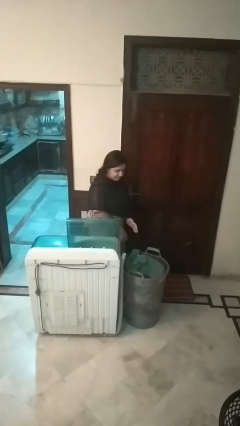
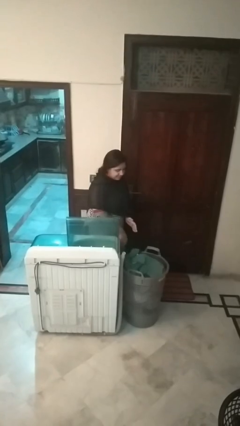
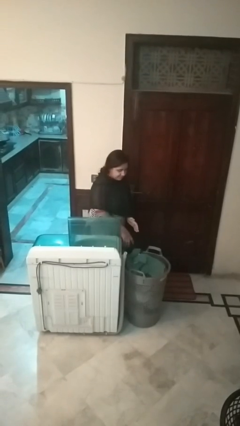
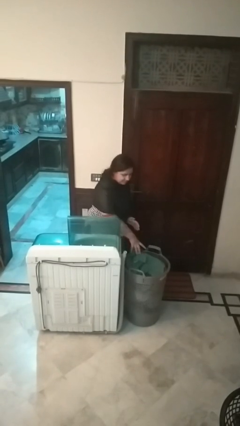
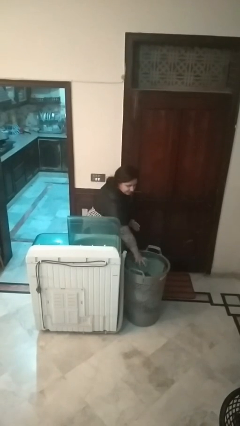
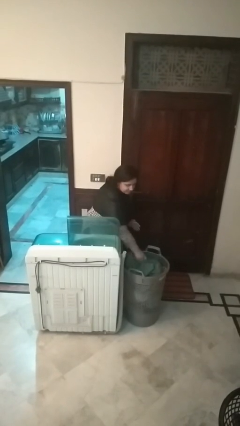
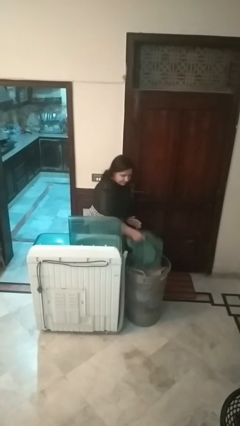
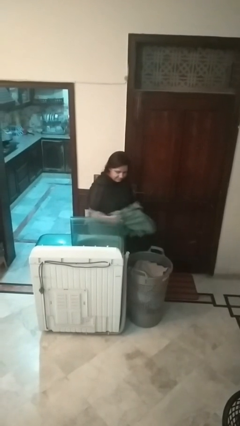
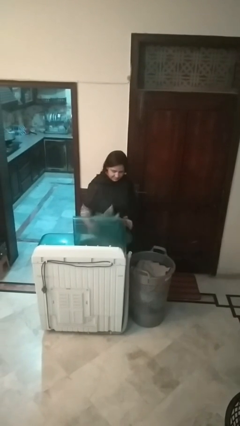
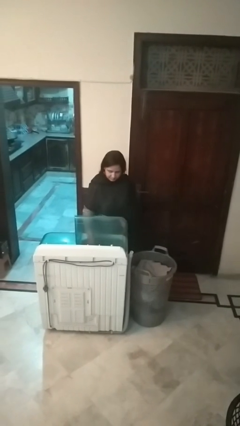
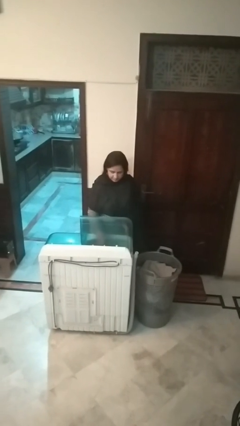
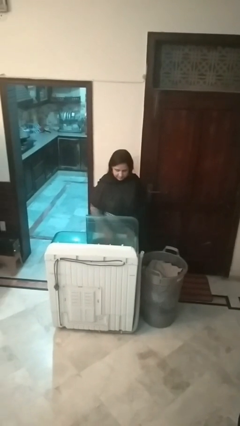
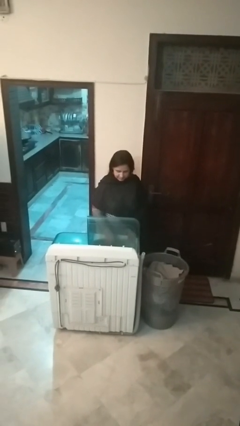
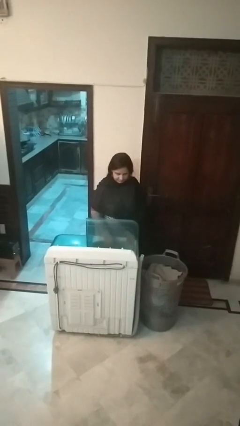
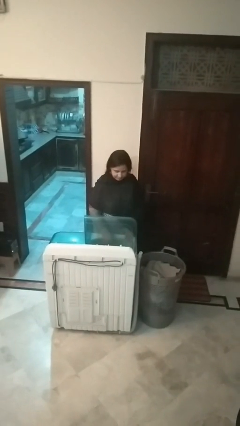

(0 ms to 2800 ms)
person loads clotheswasher

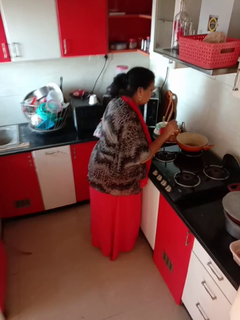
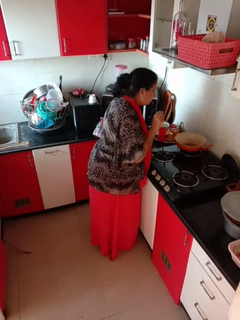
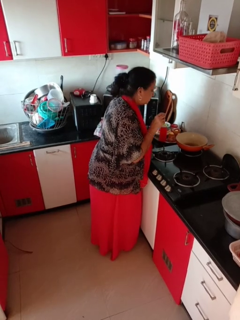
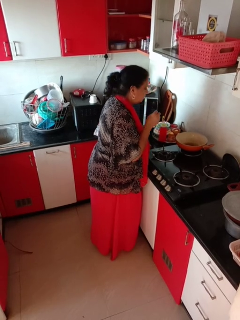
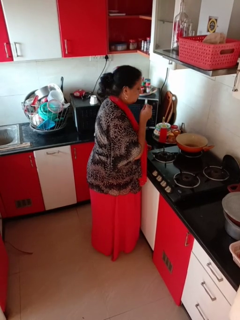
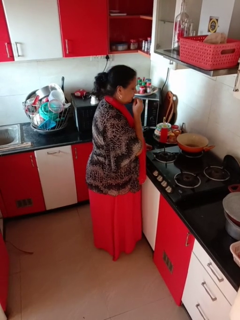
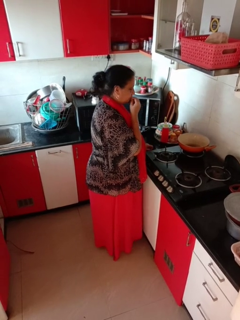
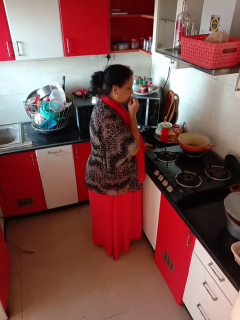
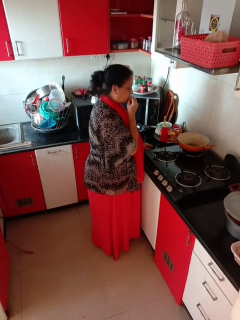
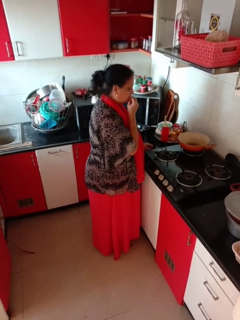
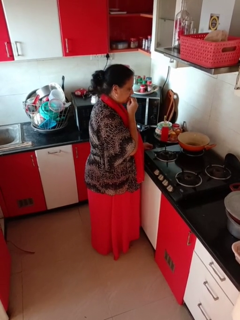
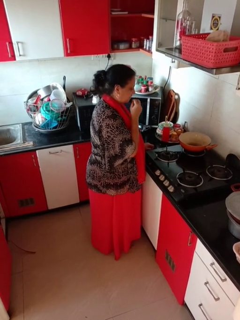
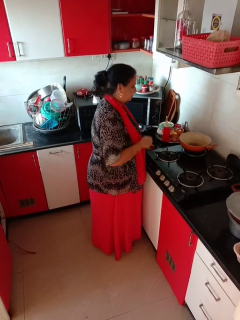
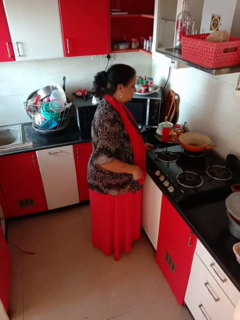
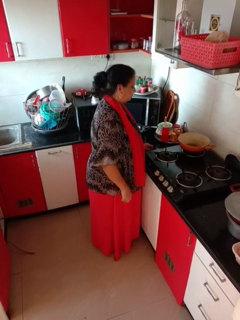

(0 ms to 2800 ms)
person burns hand

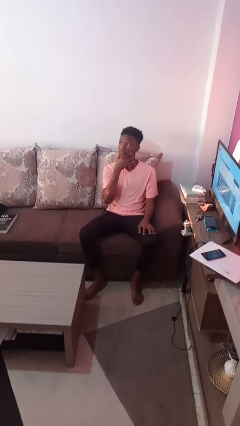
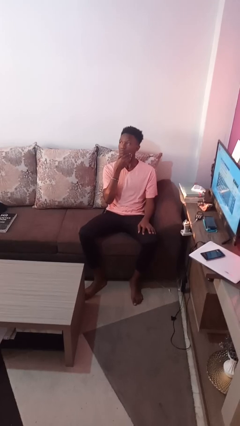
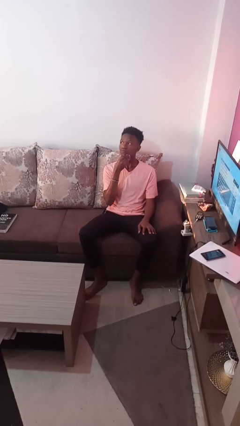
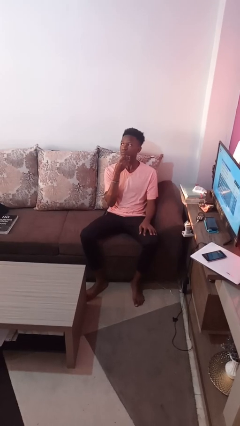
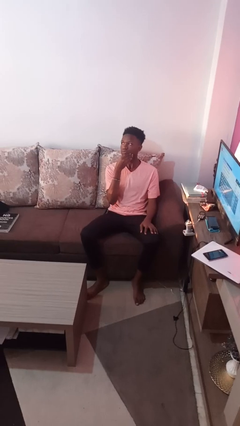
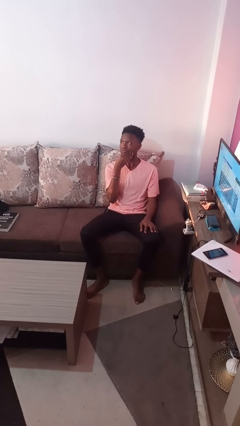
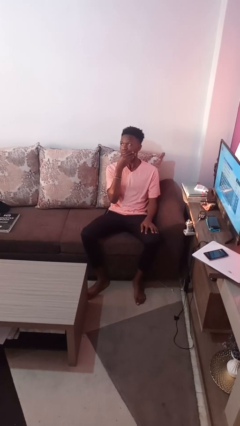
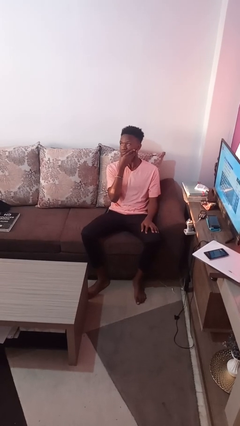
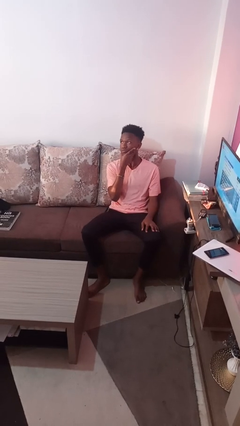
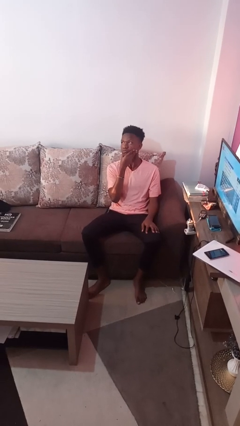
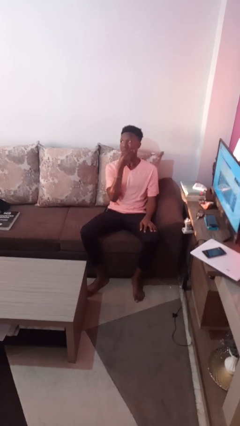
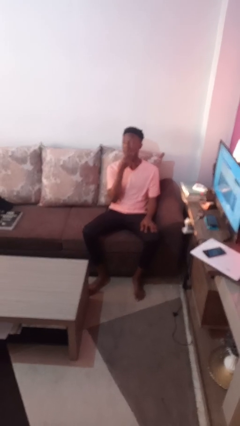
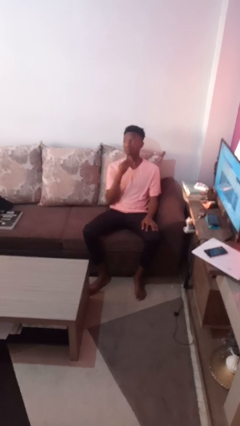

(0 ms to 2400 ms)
person strokes chin

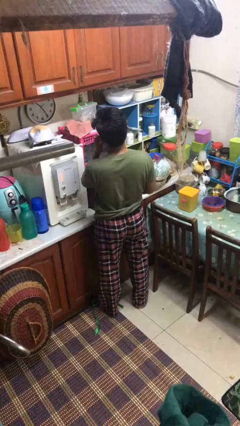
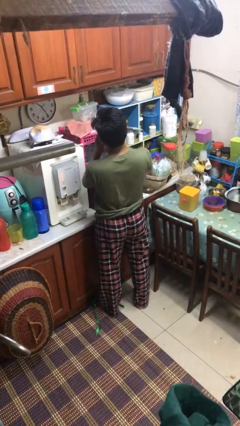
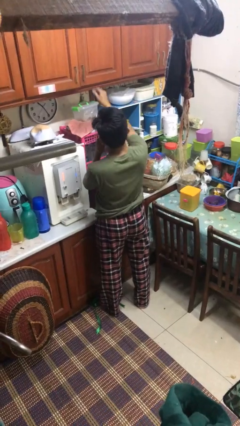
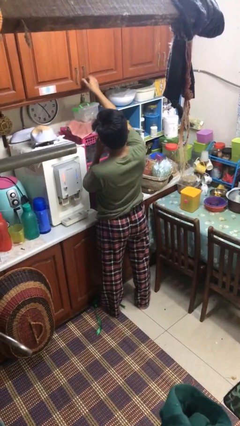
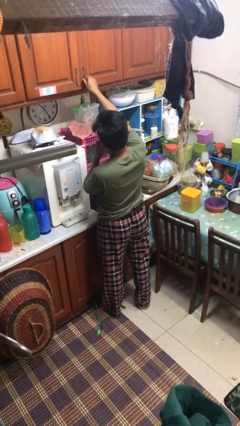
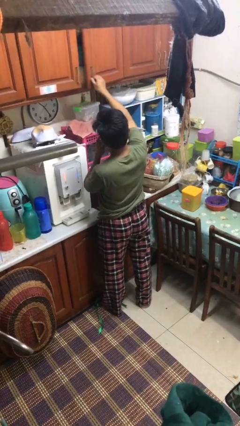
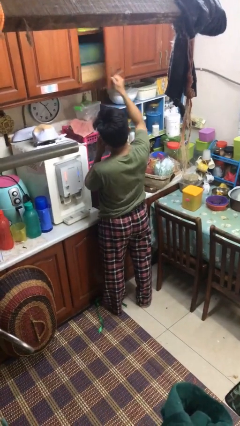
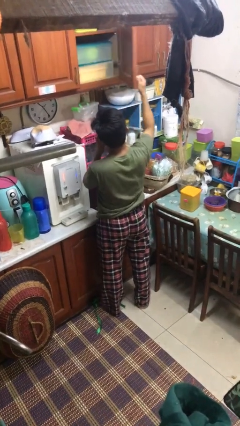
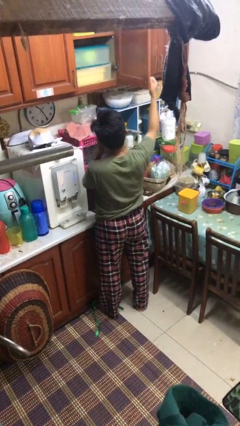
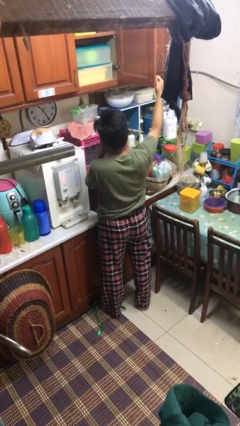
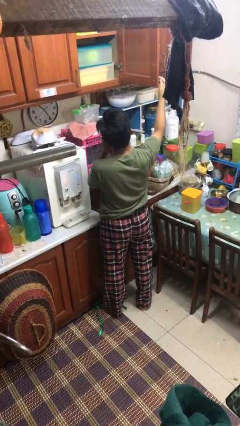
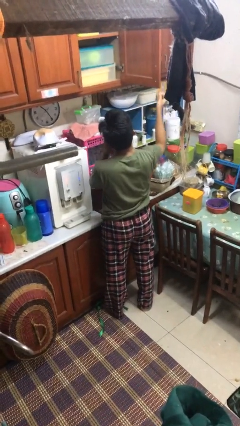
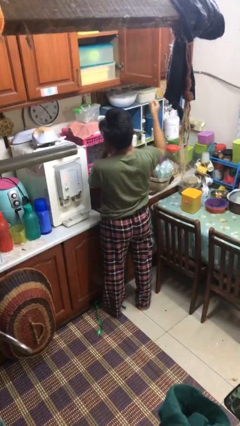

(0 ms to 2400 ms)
person opens kitchen drawer

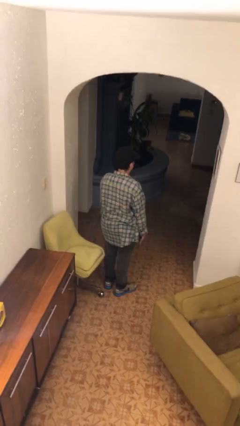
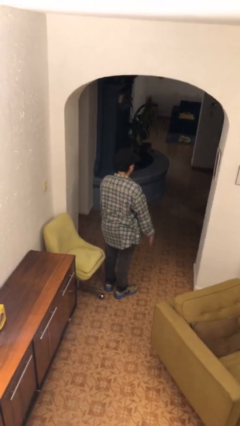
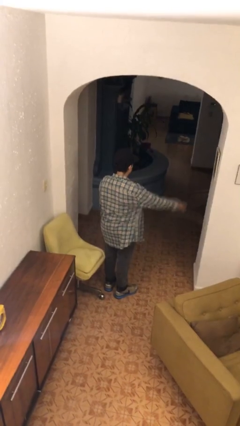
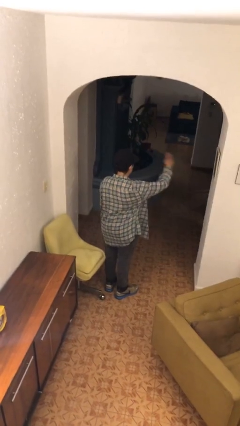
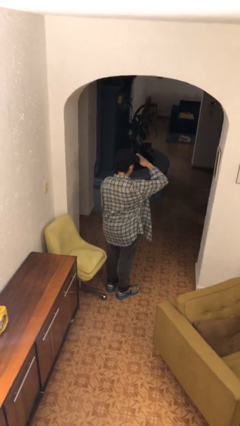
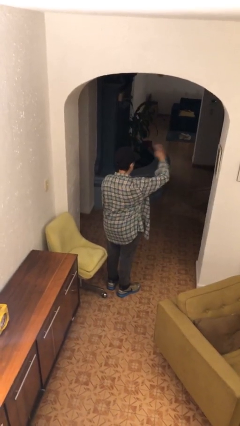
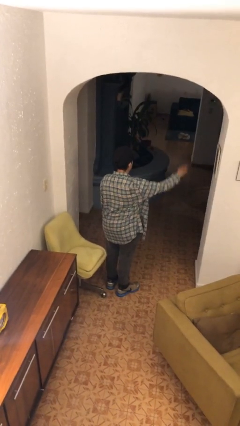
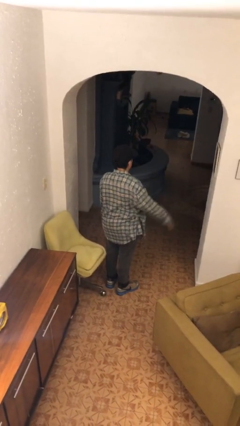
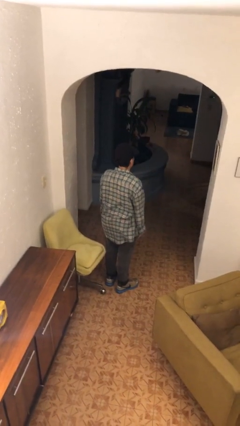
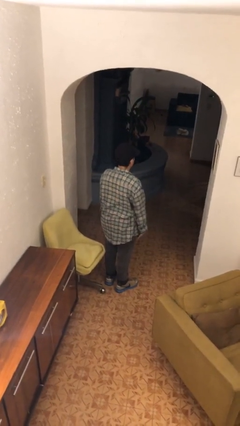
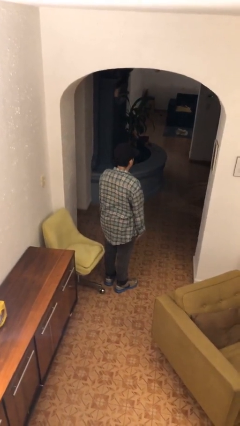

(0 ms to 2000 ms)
person salutes

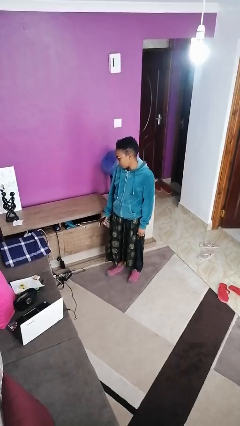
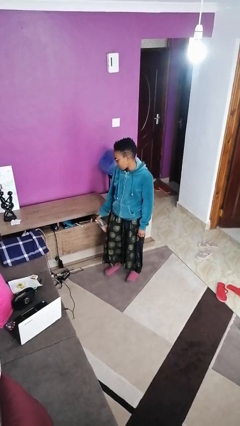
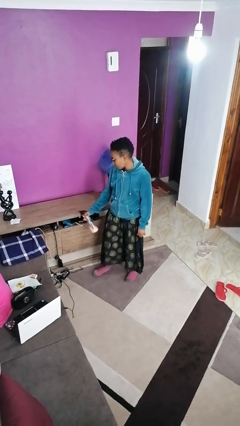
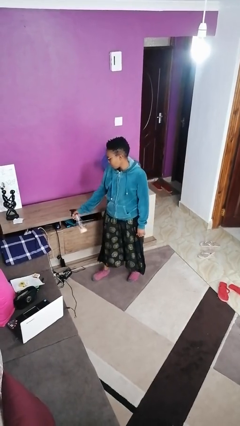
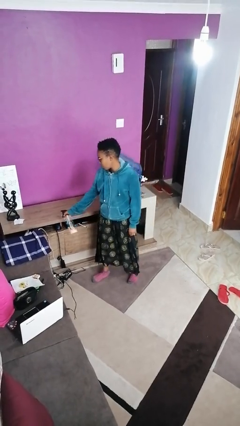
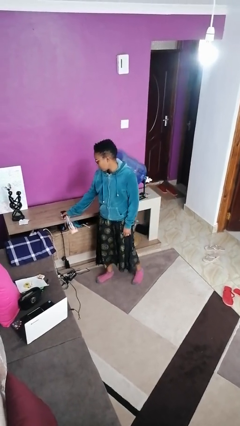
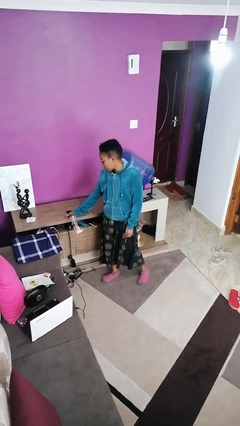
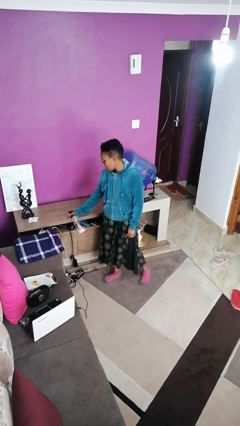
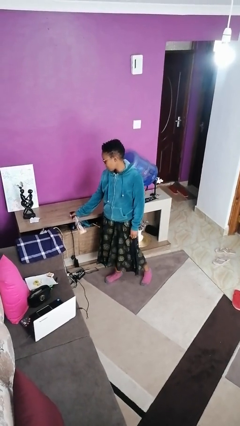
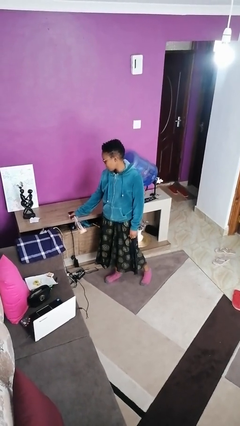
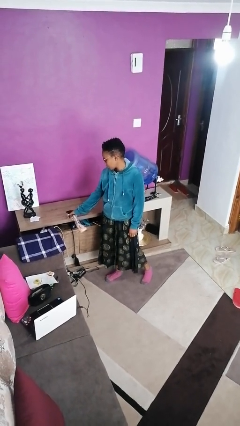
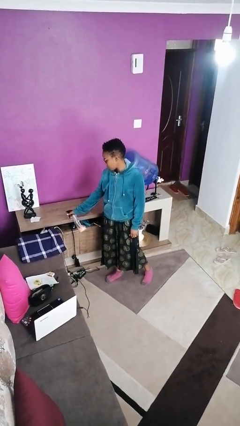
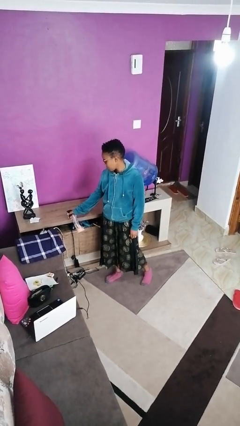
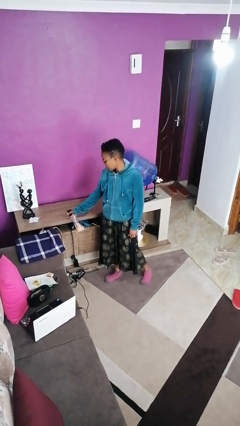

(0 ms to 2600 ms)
person sprays from bottle

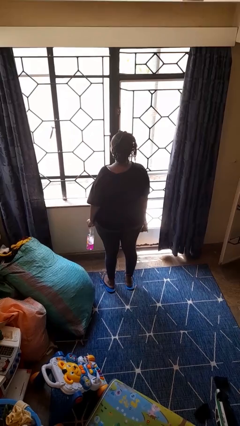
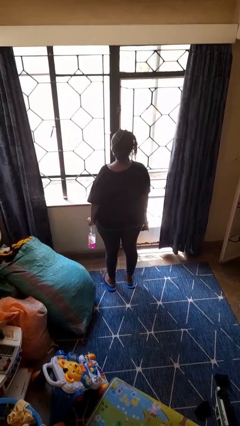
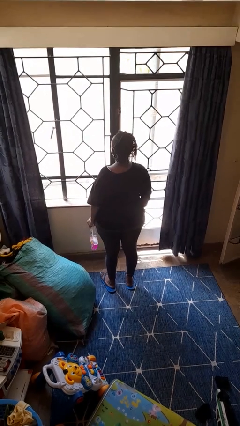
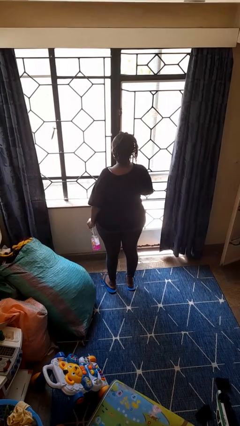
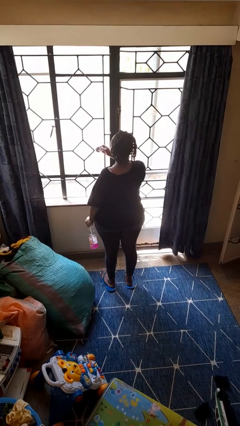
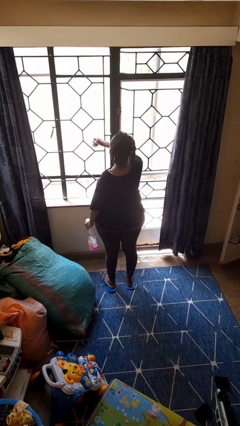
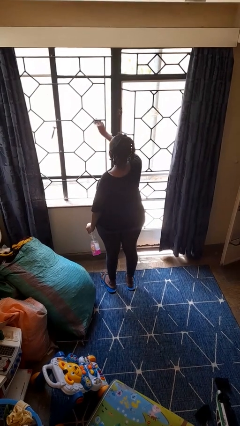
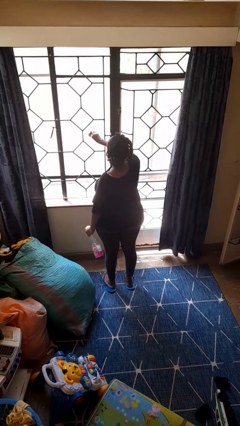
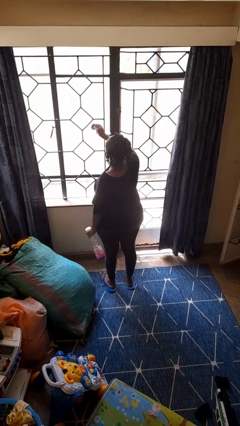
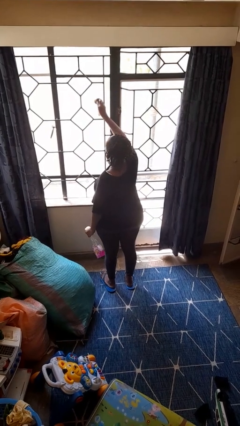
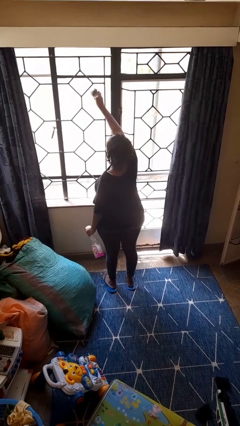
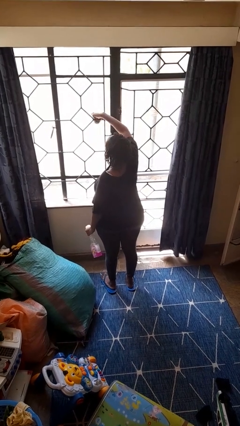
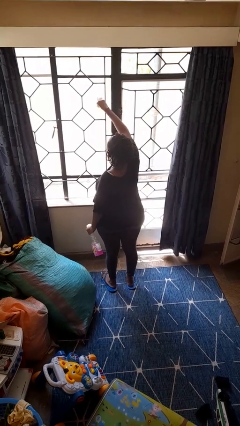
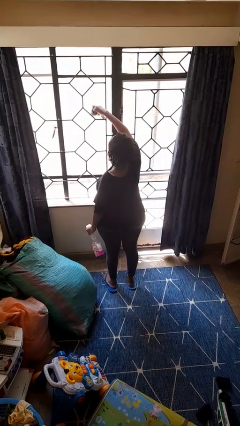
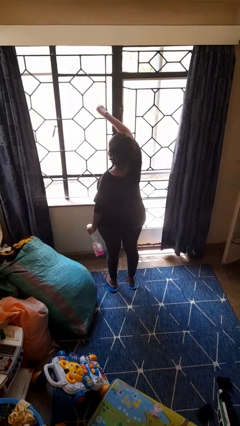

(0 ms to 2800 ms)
person washes window
